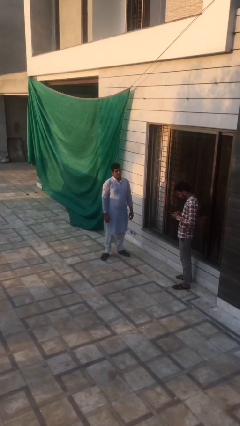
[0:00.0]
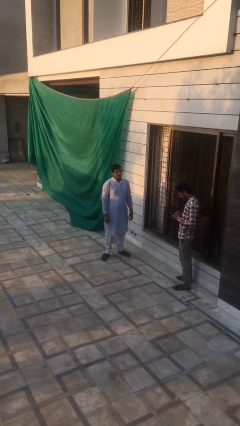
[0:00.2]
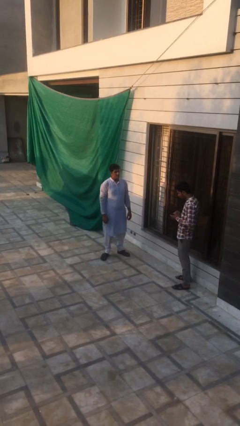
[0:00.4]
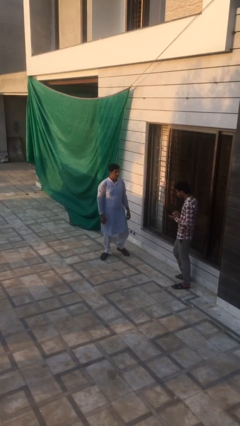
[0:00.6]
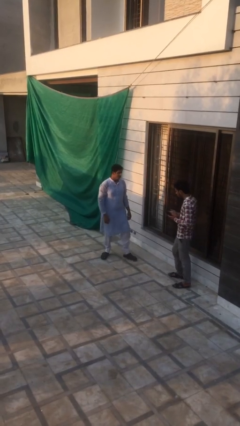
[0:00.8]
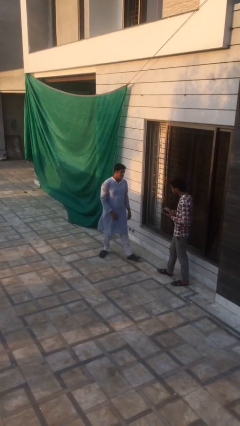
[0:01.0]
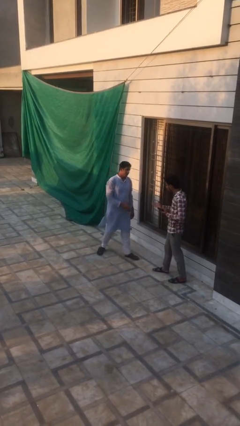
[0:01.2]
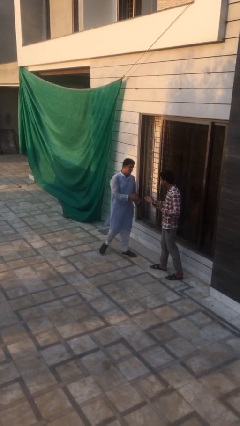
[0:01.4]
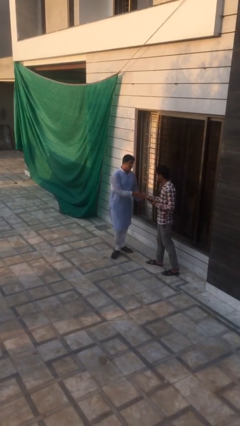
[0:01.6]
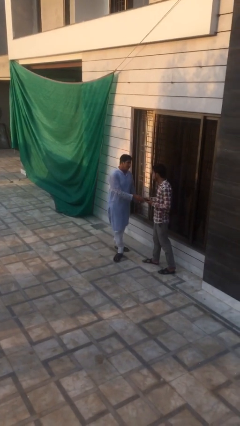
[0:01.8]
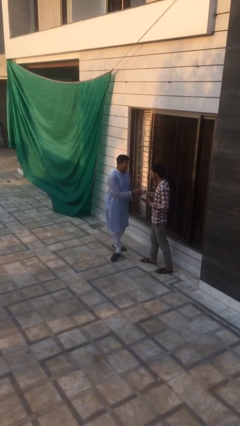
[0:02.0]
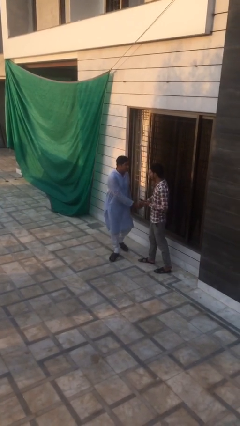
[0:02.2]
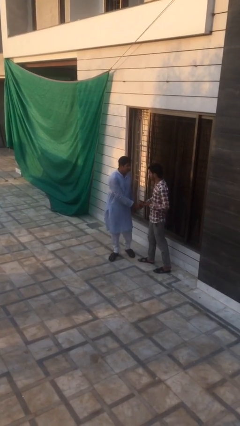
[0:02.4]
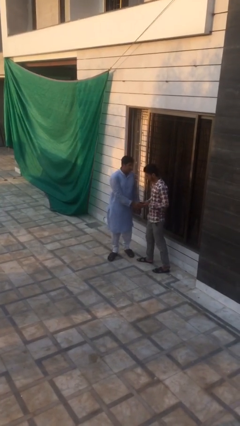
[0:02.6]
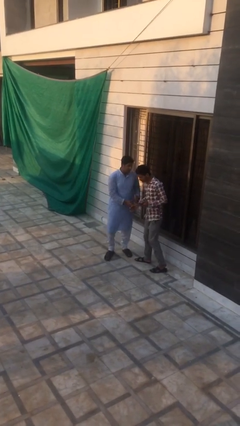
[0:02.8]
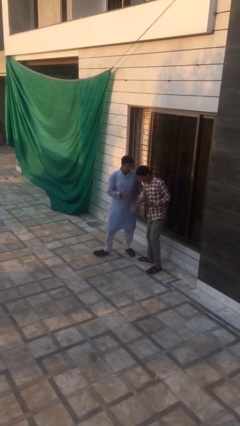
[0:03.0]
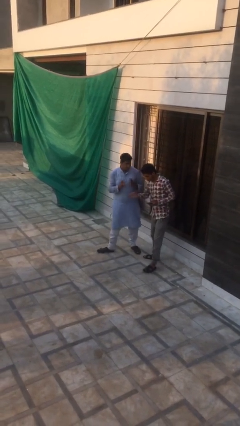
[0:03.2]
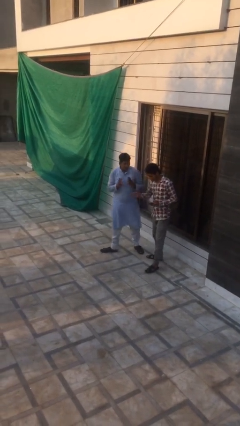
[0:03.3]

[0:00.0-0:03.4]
person shakes hand

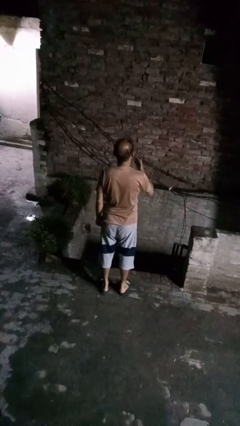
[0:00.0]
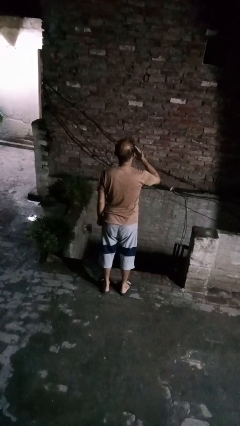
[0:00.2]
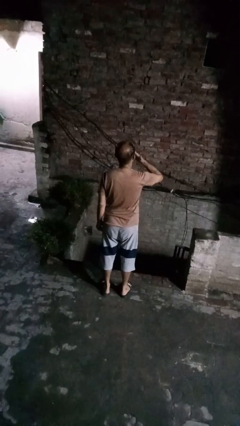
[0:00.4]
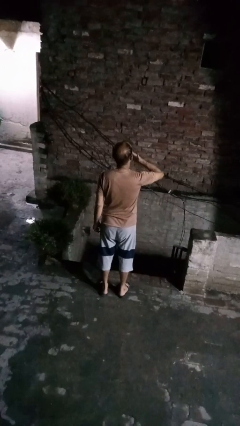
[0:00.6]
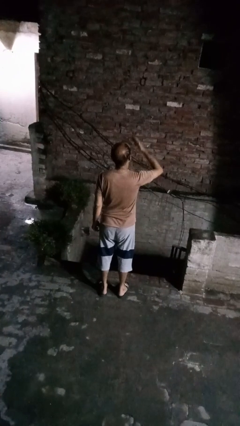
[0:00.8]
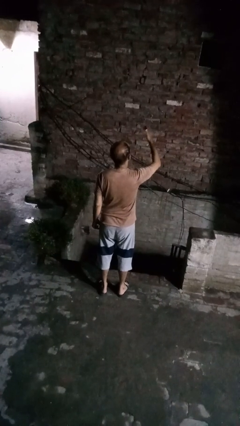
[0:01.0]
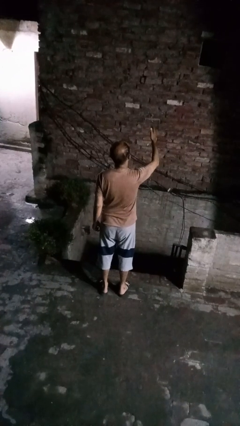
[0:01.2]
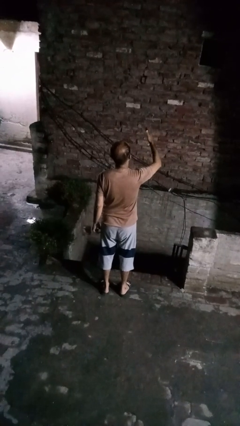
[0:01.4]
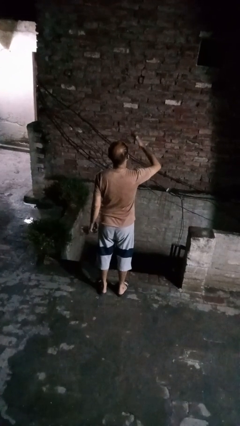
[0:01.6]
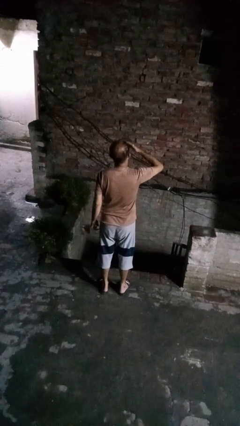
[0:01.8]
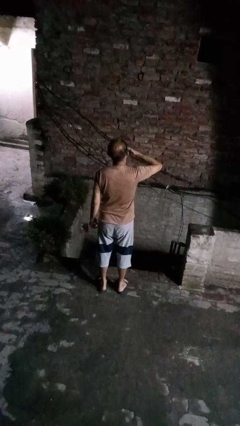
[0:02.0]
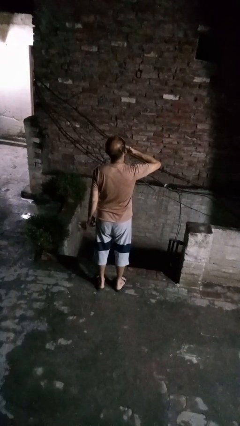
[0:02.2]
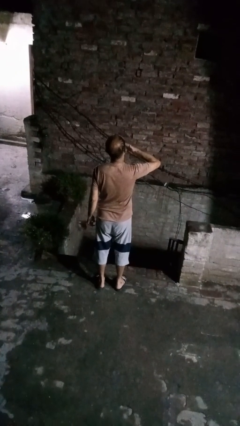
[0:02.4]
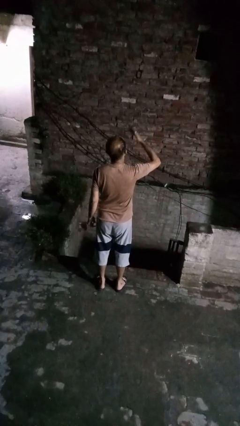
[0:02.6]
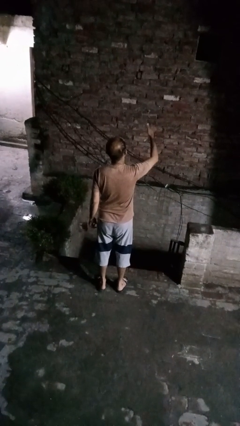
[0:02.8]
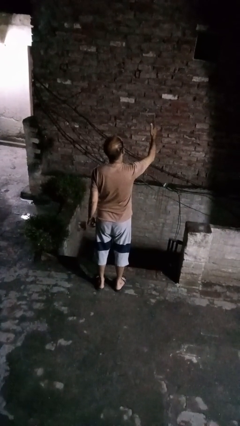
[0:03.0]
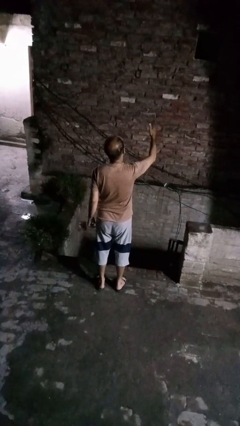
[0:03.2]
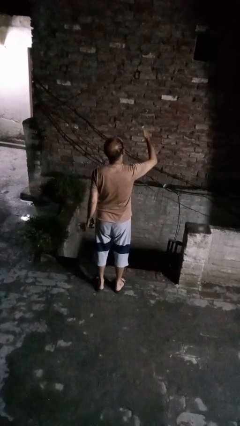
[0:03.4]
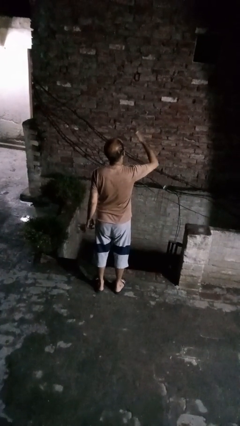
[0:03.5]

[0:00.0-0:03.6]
person gestures blow kiss

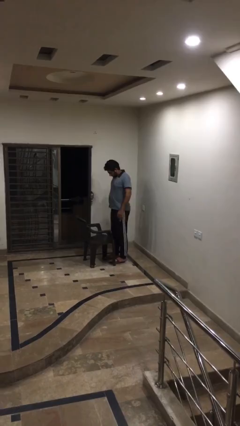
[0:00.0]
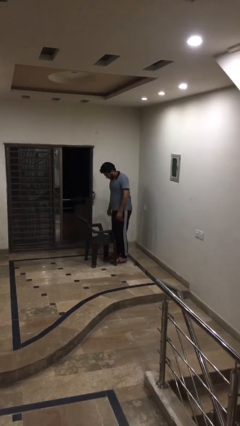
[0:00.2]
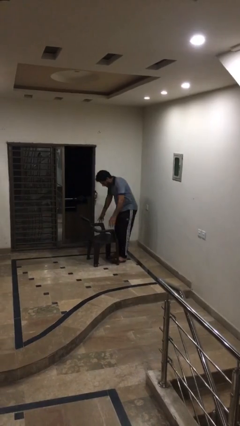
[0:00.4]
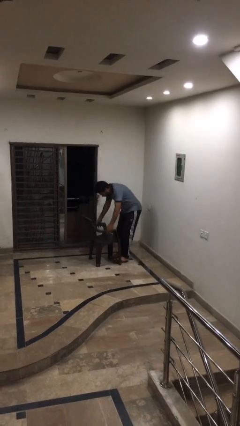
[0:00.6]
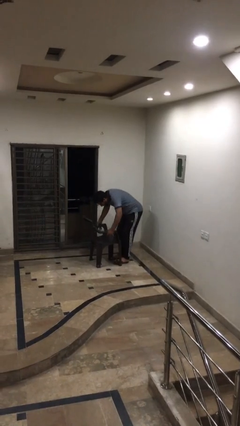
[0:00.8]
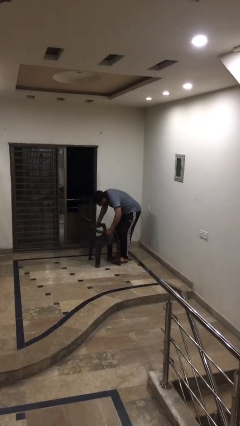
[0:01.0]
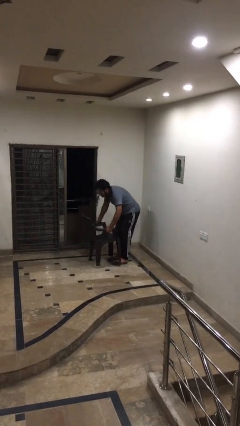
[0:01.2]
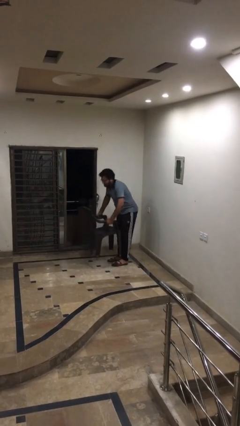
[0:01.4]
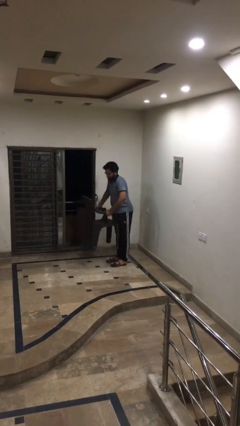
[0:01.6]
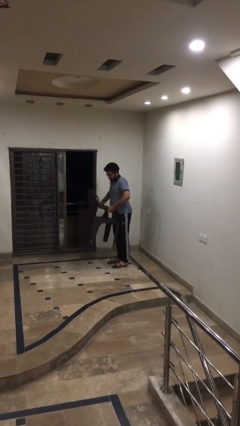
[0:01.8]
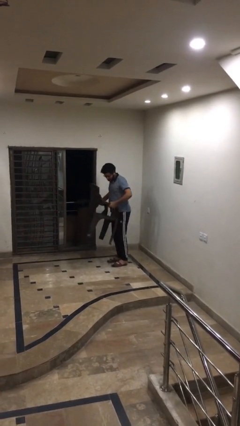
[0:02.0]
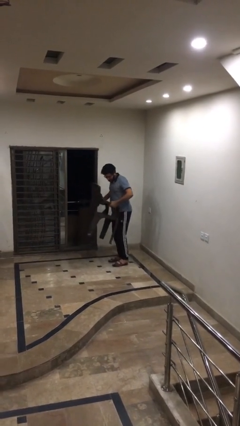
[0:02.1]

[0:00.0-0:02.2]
person picks up object from floor

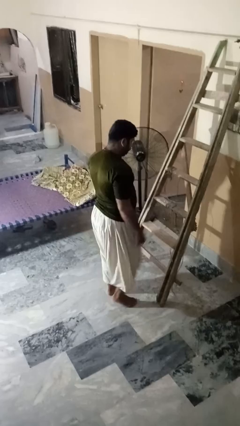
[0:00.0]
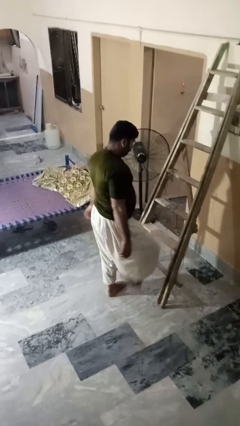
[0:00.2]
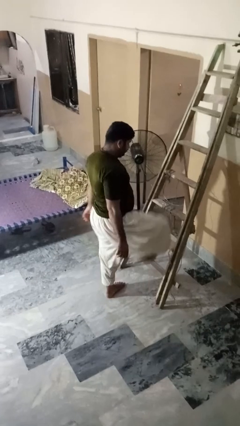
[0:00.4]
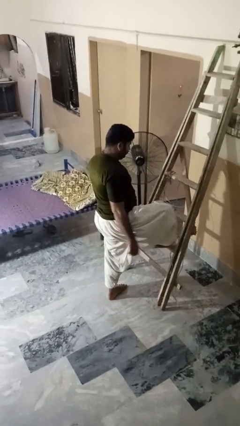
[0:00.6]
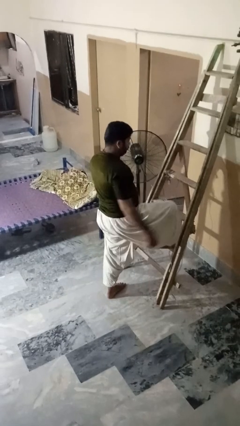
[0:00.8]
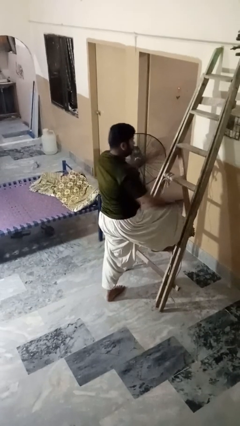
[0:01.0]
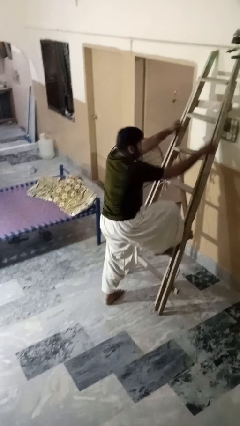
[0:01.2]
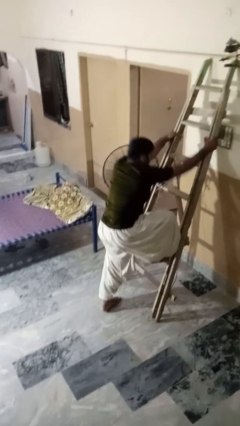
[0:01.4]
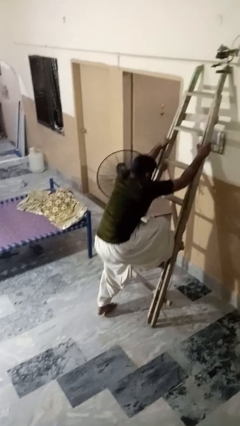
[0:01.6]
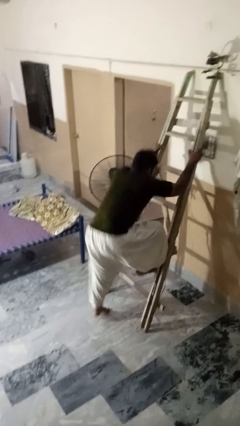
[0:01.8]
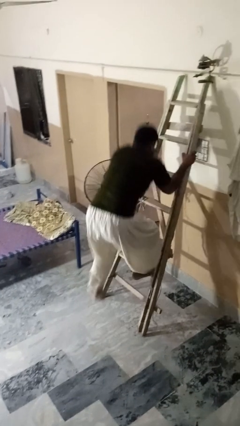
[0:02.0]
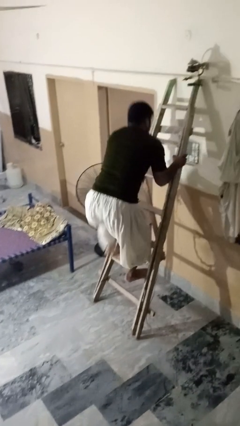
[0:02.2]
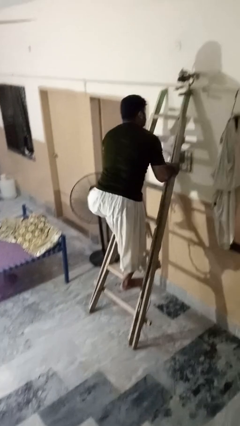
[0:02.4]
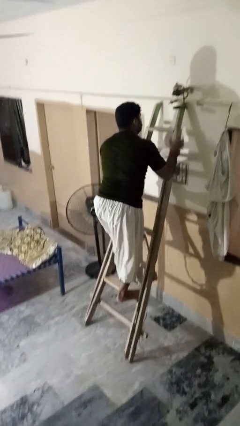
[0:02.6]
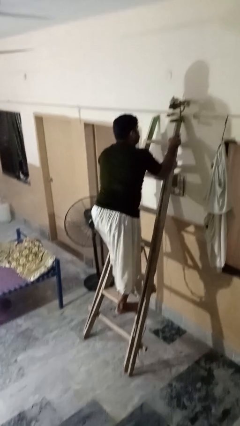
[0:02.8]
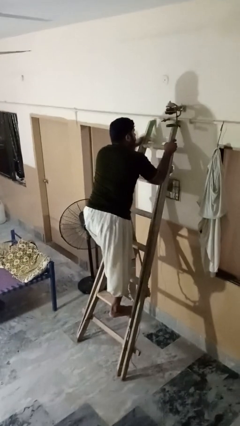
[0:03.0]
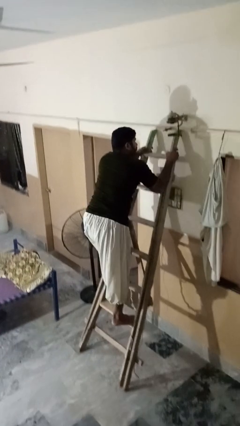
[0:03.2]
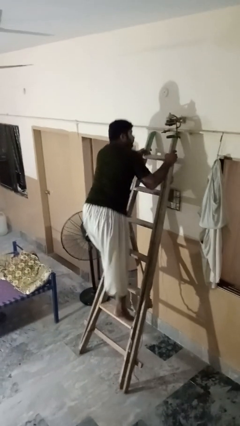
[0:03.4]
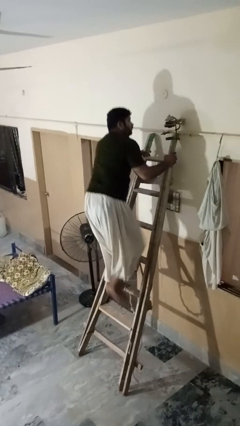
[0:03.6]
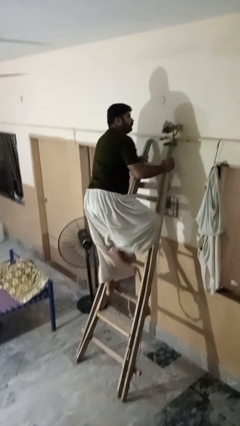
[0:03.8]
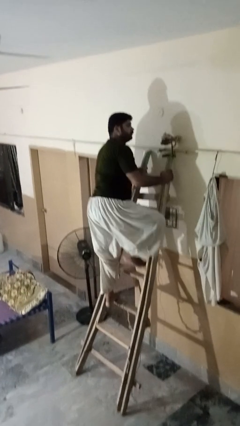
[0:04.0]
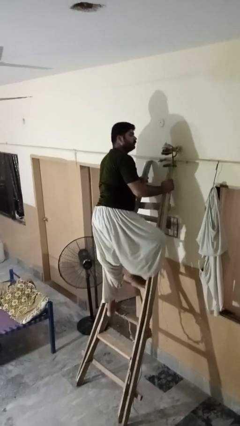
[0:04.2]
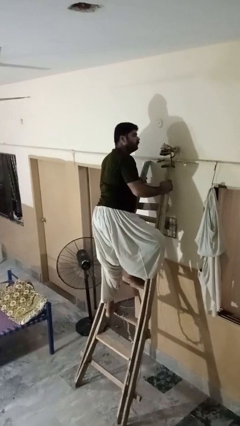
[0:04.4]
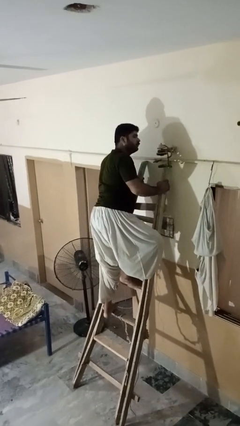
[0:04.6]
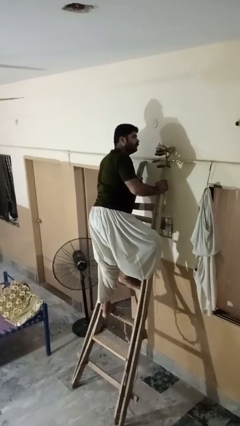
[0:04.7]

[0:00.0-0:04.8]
person climbs up ladder

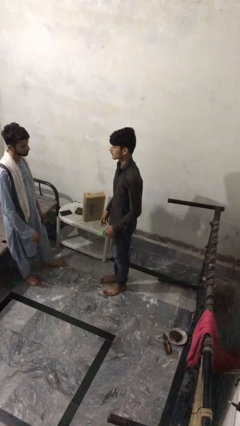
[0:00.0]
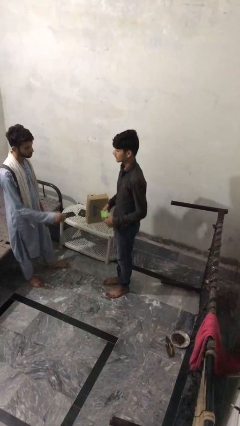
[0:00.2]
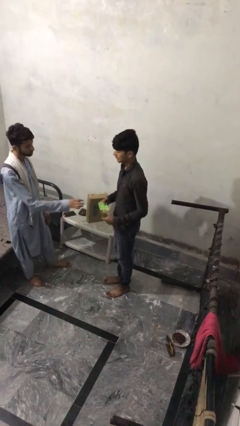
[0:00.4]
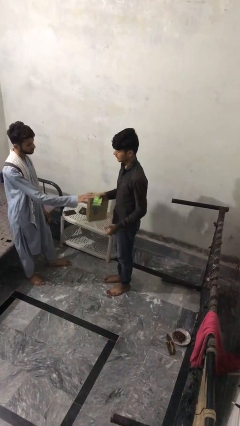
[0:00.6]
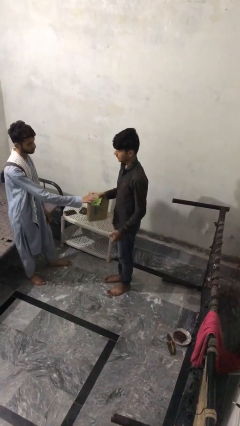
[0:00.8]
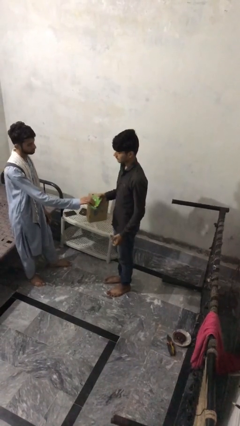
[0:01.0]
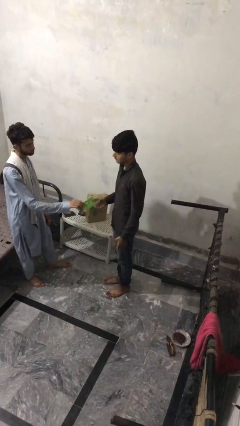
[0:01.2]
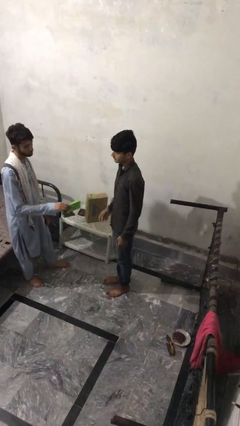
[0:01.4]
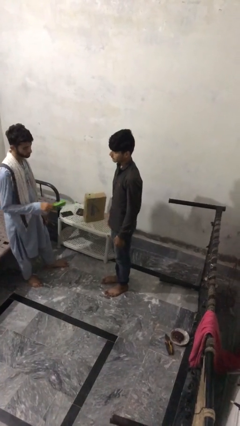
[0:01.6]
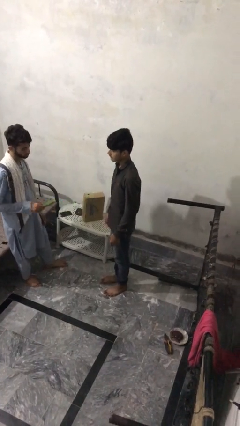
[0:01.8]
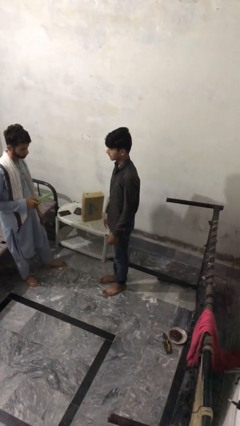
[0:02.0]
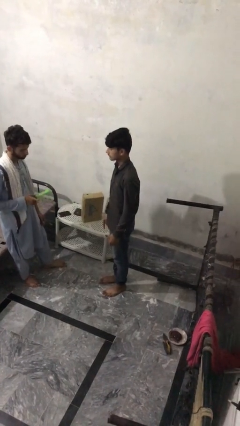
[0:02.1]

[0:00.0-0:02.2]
person transfers object to person

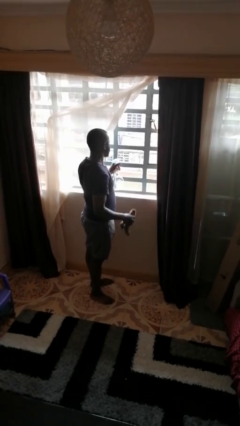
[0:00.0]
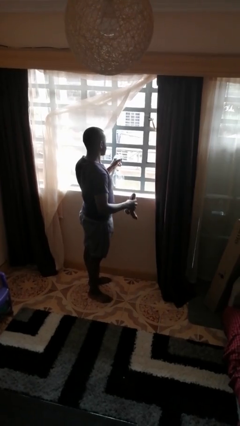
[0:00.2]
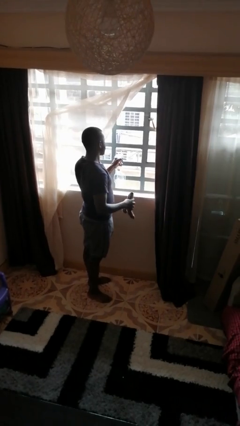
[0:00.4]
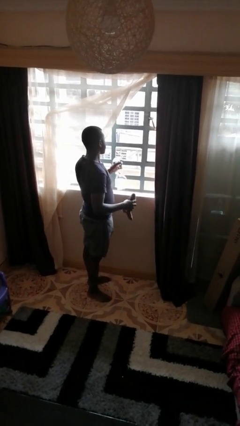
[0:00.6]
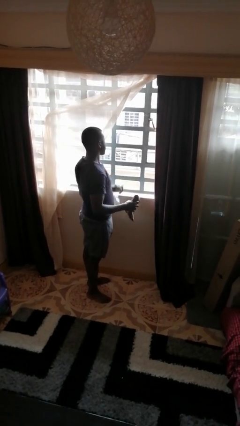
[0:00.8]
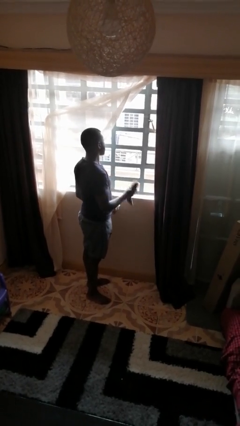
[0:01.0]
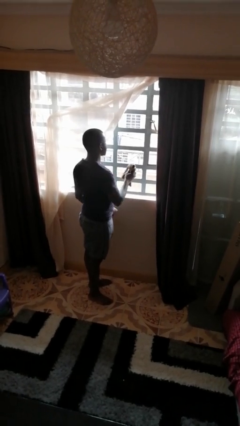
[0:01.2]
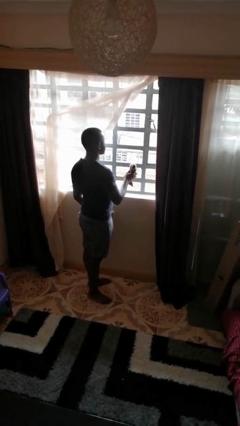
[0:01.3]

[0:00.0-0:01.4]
person sprays from bottle
